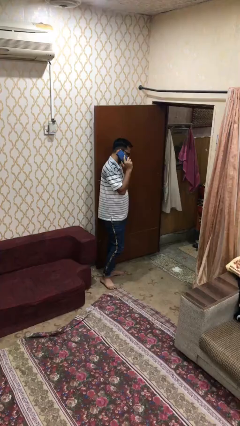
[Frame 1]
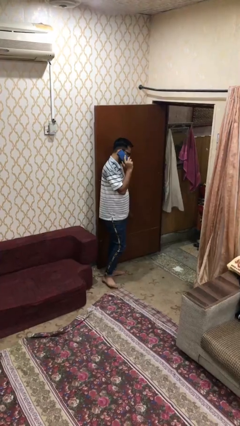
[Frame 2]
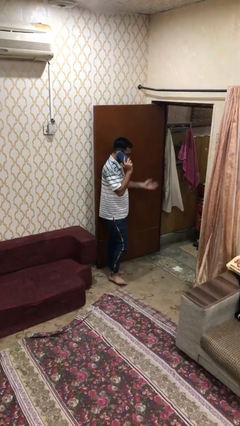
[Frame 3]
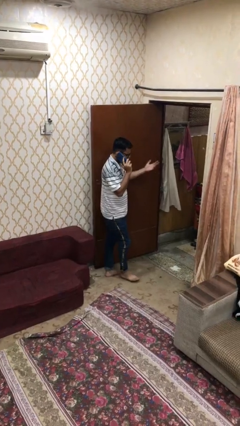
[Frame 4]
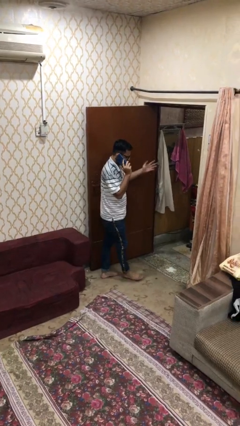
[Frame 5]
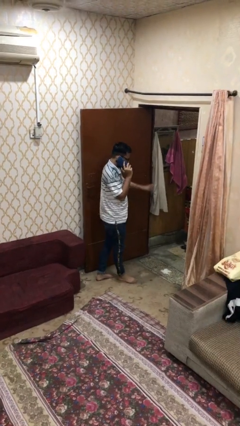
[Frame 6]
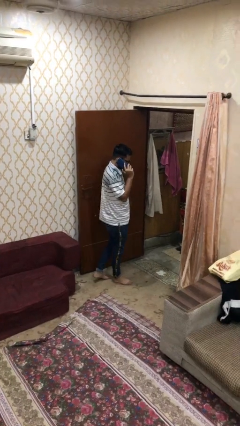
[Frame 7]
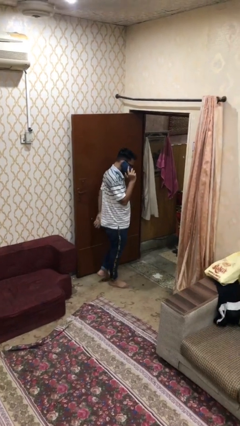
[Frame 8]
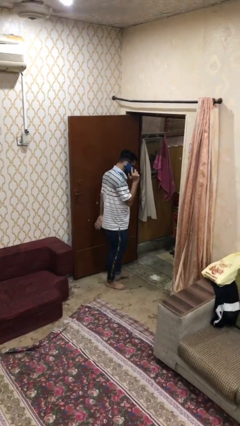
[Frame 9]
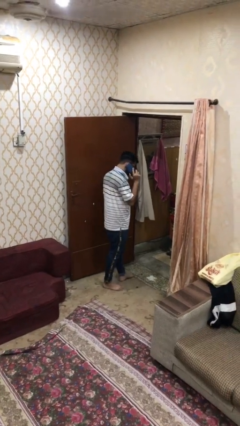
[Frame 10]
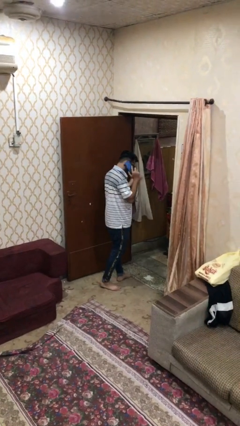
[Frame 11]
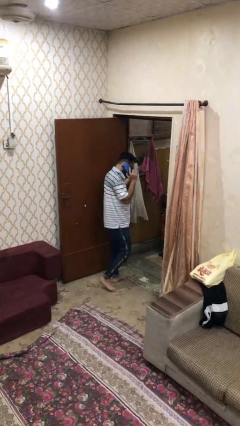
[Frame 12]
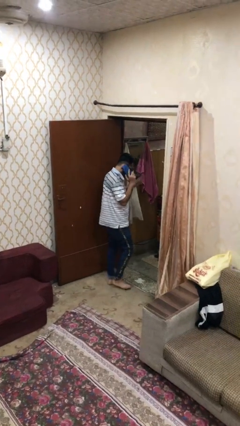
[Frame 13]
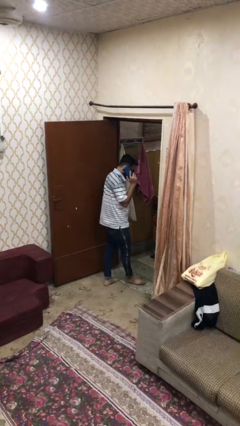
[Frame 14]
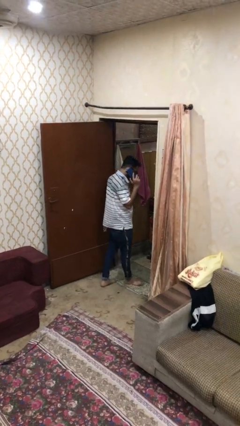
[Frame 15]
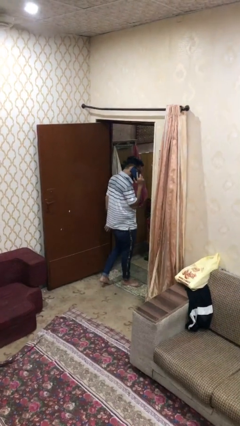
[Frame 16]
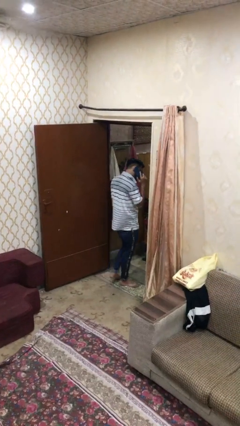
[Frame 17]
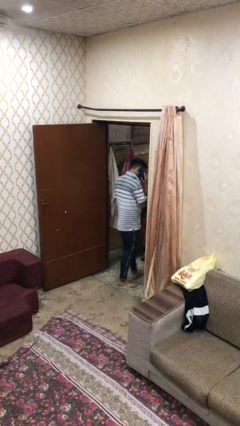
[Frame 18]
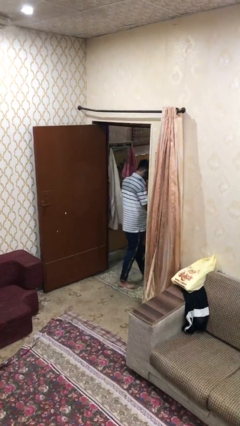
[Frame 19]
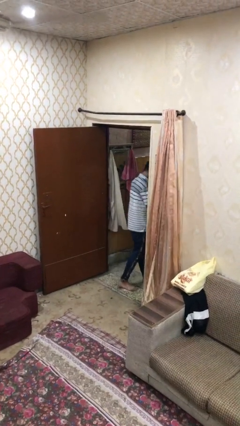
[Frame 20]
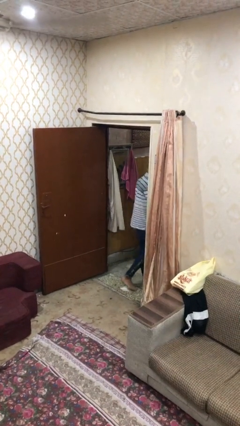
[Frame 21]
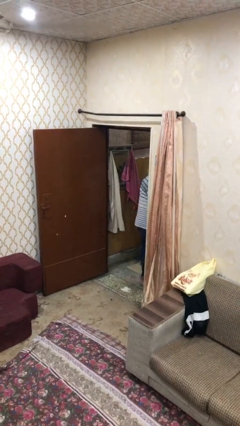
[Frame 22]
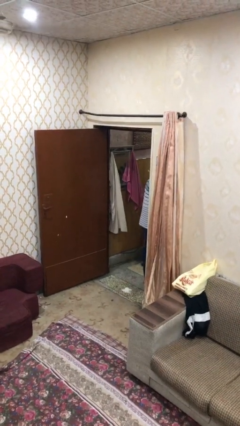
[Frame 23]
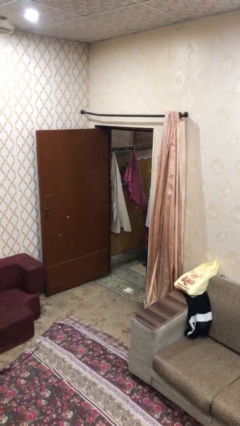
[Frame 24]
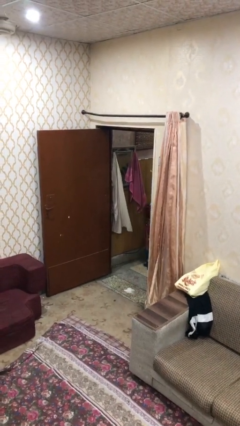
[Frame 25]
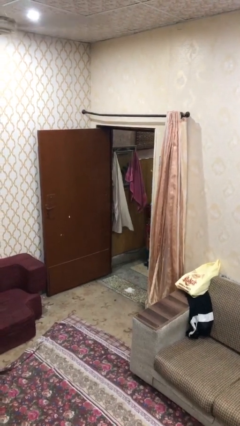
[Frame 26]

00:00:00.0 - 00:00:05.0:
person exits scene through structure

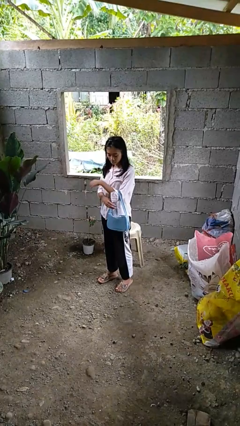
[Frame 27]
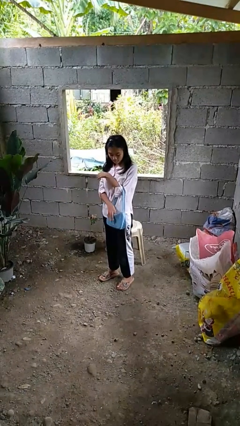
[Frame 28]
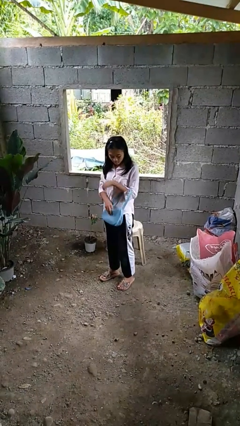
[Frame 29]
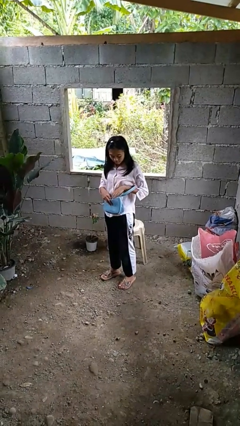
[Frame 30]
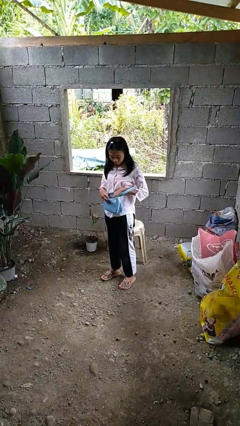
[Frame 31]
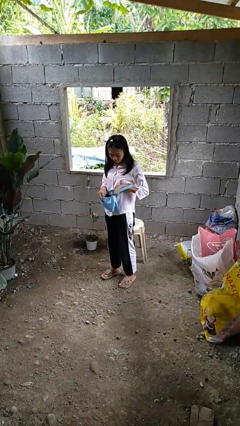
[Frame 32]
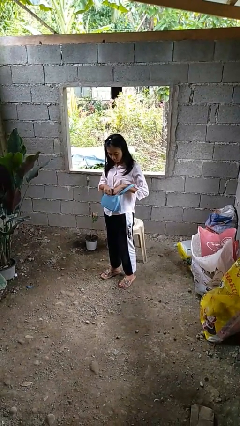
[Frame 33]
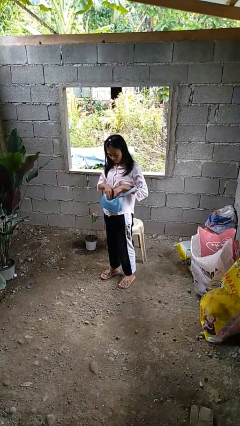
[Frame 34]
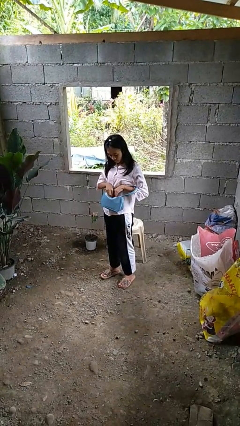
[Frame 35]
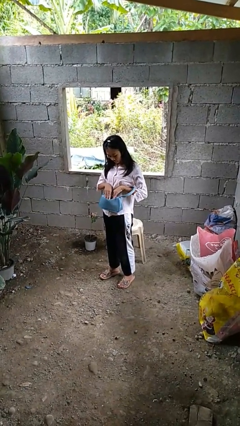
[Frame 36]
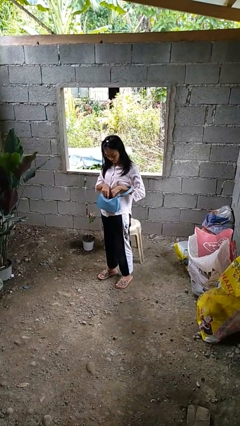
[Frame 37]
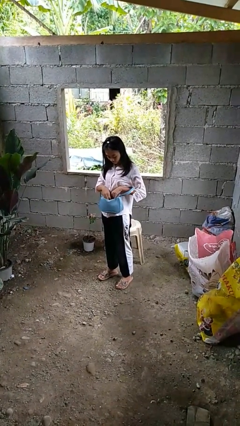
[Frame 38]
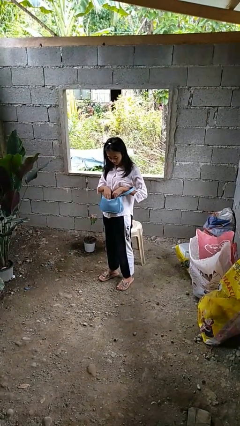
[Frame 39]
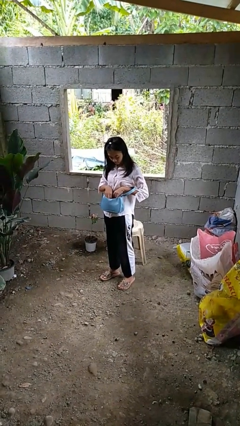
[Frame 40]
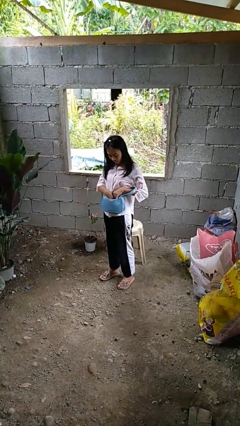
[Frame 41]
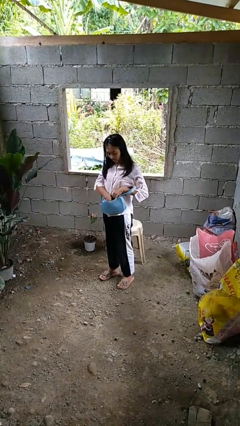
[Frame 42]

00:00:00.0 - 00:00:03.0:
person searches in purse

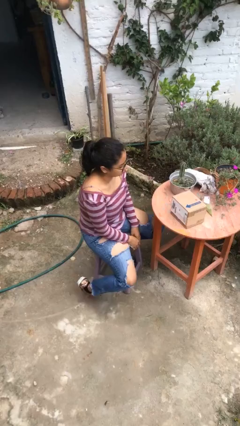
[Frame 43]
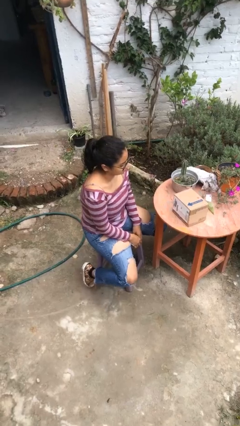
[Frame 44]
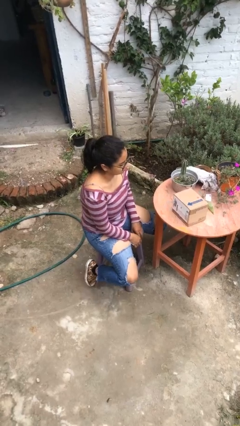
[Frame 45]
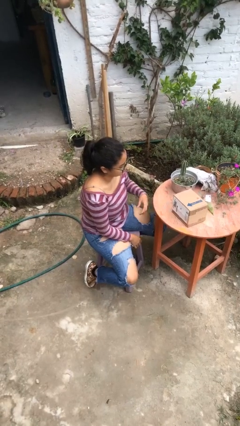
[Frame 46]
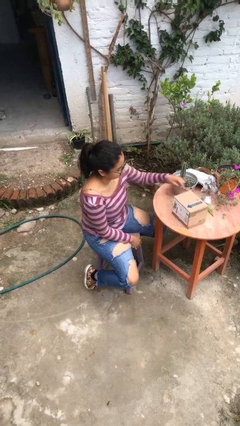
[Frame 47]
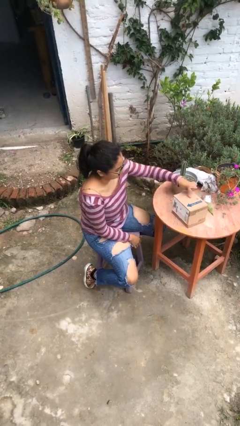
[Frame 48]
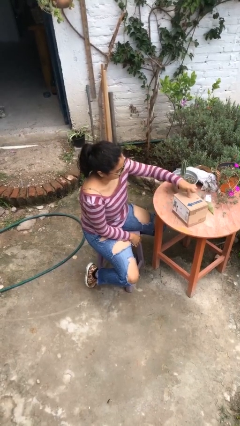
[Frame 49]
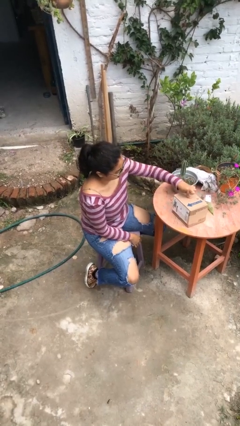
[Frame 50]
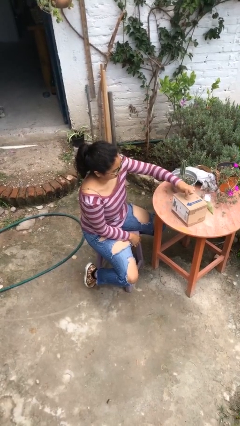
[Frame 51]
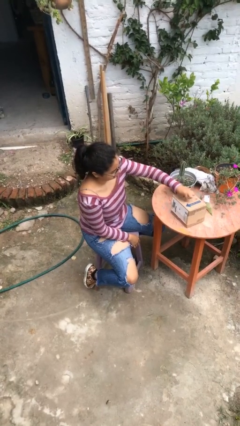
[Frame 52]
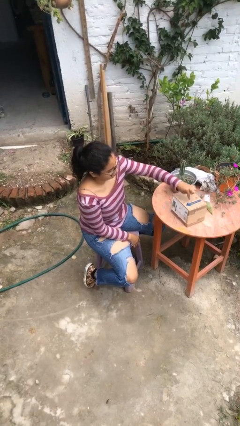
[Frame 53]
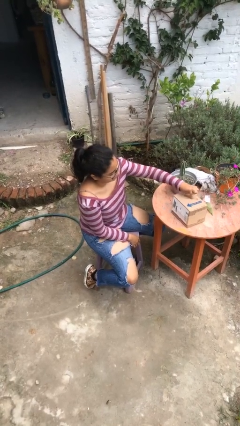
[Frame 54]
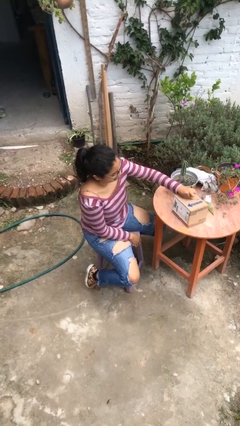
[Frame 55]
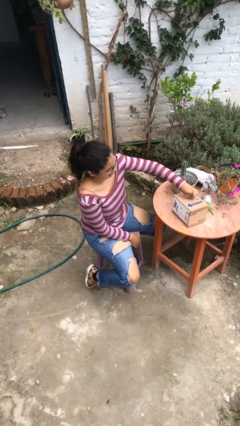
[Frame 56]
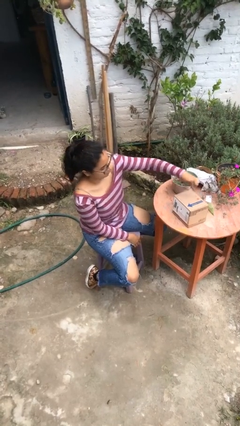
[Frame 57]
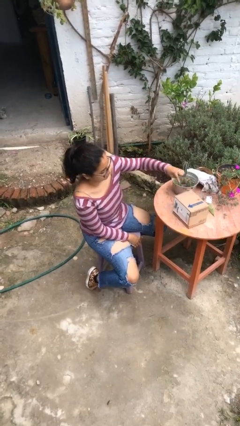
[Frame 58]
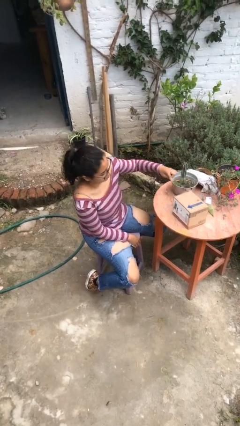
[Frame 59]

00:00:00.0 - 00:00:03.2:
person taps object with finger

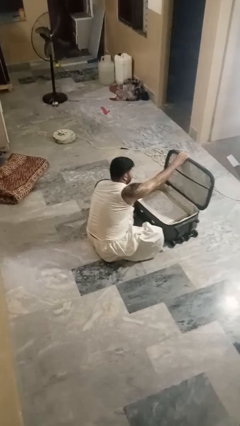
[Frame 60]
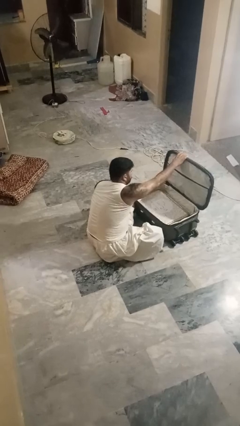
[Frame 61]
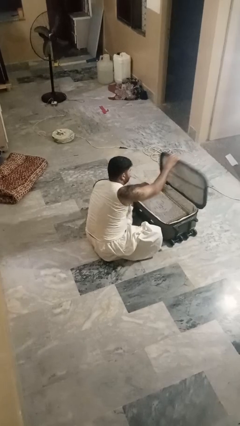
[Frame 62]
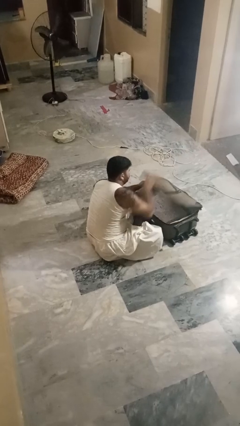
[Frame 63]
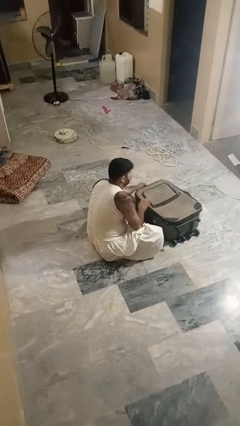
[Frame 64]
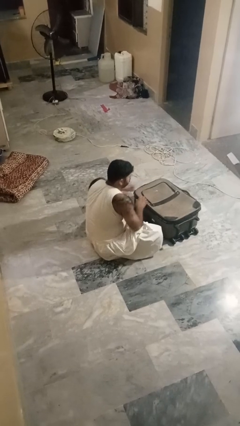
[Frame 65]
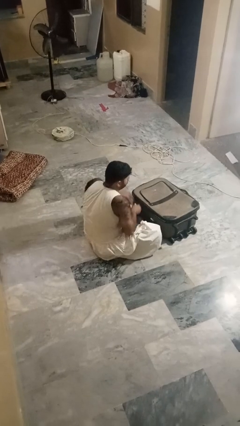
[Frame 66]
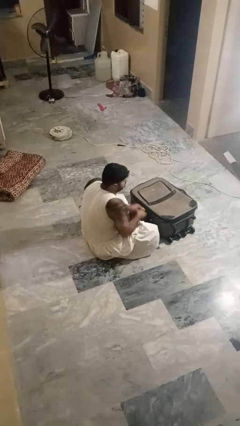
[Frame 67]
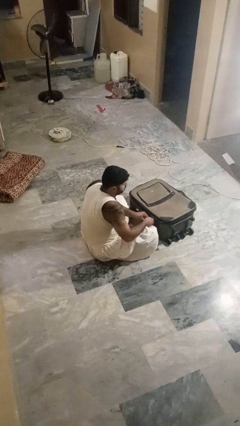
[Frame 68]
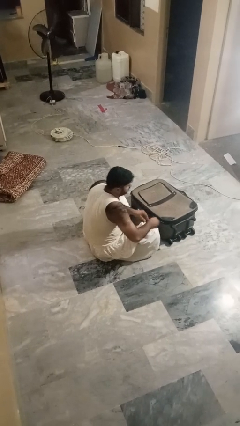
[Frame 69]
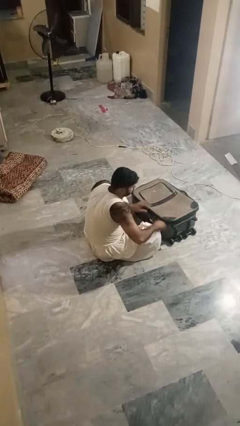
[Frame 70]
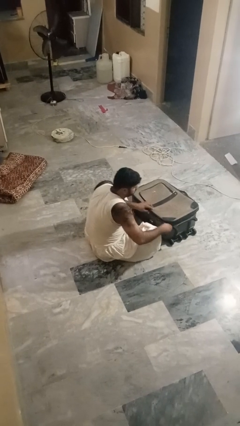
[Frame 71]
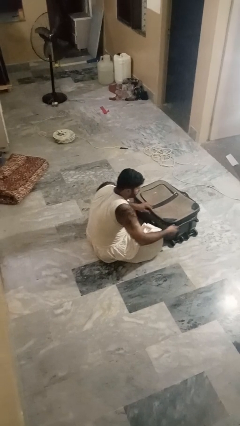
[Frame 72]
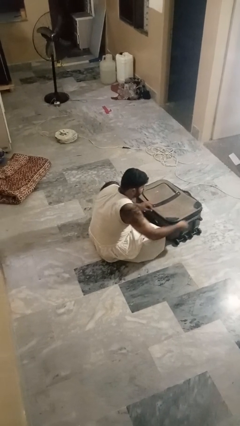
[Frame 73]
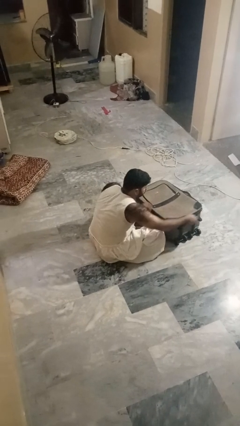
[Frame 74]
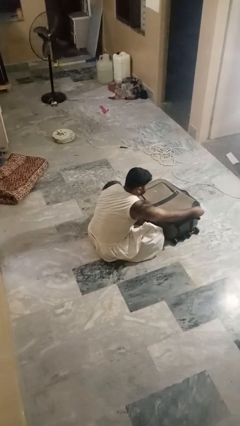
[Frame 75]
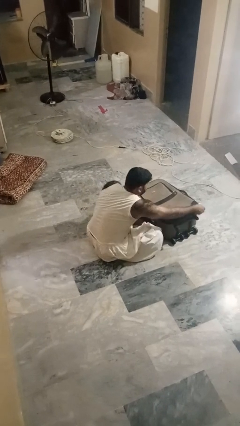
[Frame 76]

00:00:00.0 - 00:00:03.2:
person closes suitcase

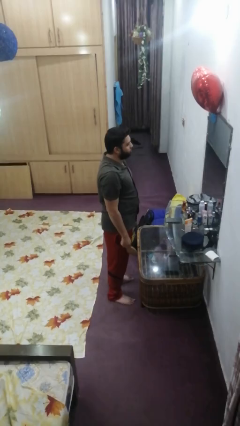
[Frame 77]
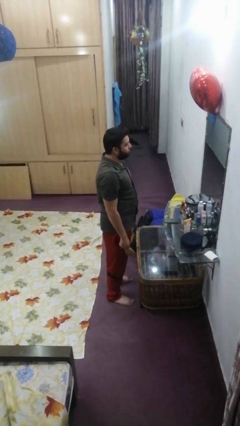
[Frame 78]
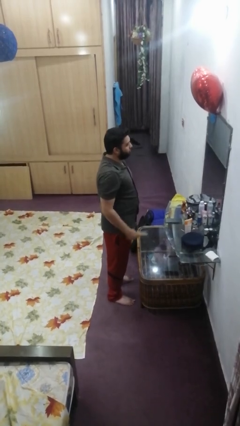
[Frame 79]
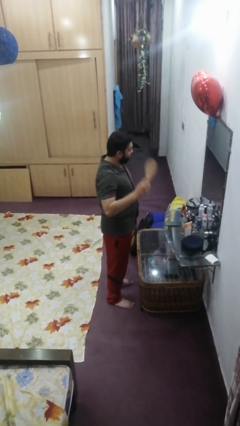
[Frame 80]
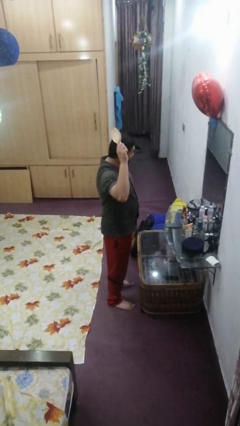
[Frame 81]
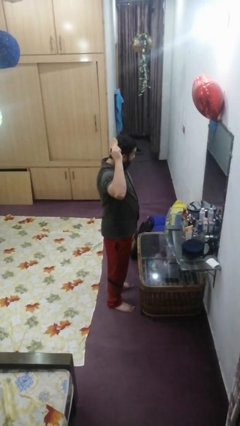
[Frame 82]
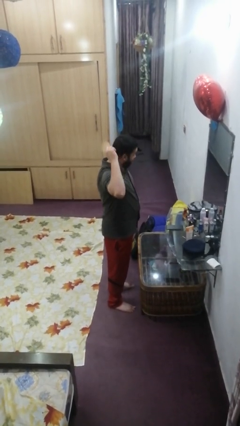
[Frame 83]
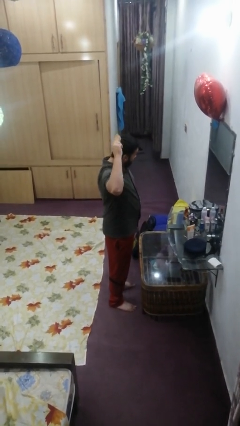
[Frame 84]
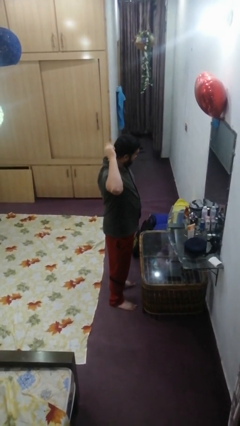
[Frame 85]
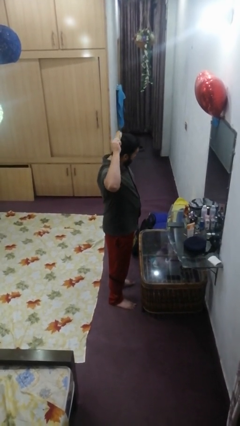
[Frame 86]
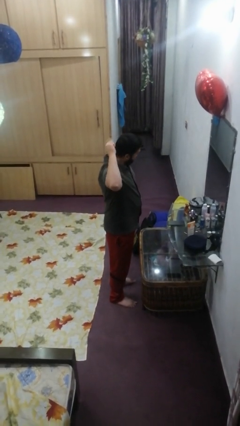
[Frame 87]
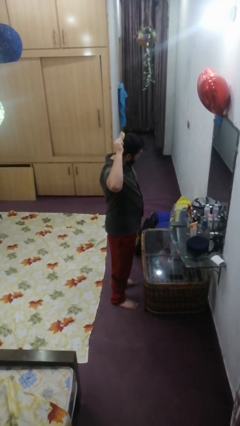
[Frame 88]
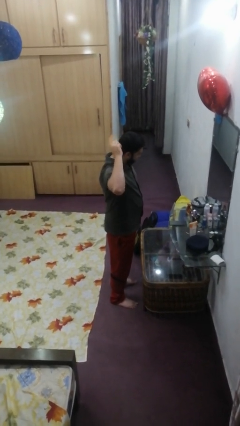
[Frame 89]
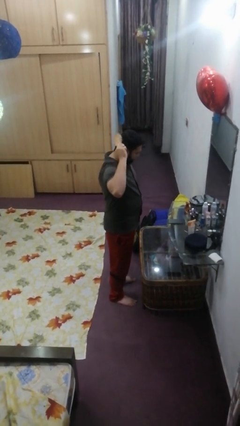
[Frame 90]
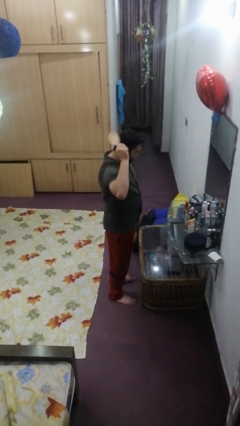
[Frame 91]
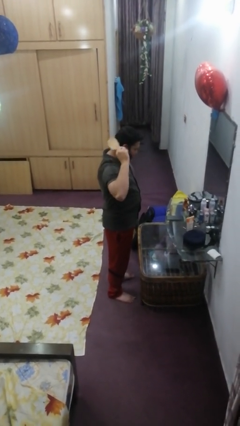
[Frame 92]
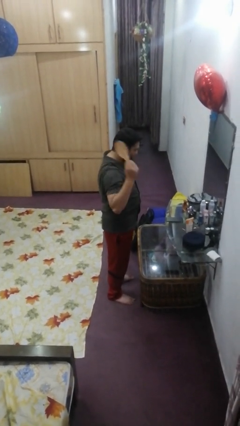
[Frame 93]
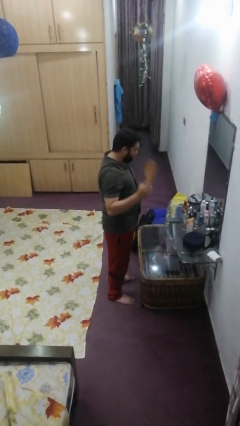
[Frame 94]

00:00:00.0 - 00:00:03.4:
person brushes hair
